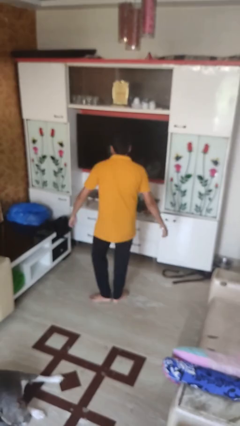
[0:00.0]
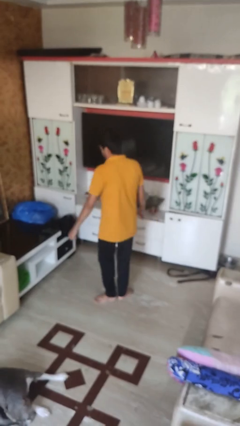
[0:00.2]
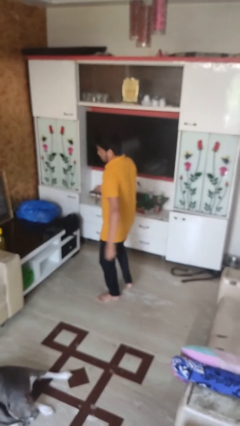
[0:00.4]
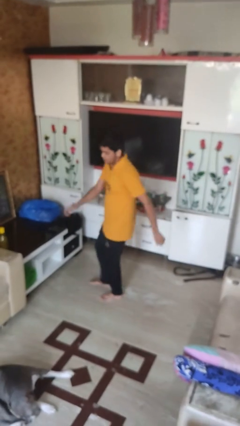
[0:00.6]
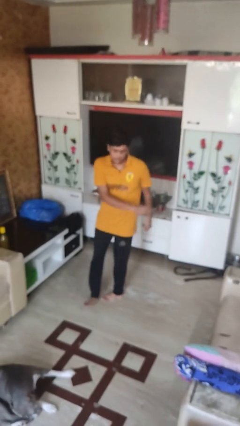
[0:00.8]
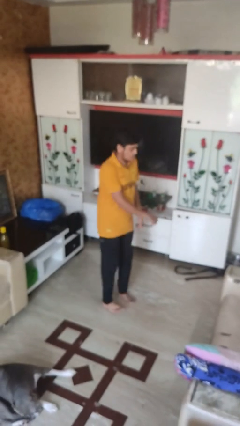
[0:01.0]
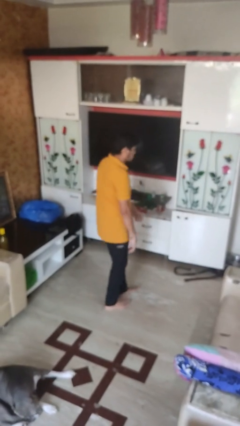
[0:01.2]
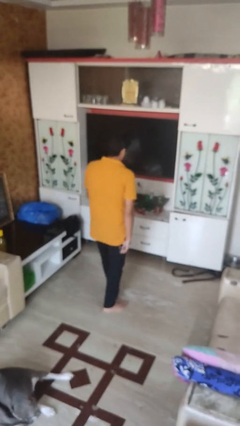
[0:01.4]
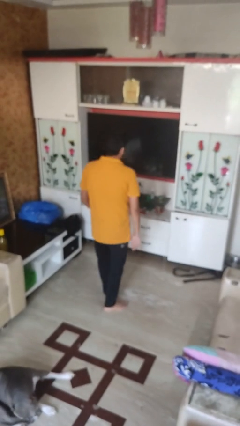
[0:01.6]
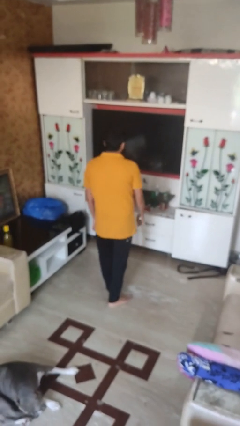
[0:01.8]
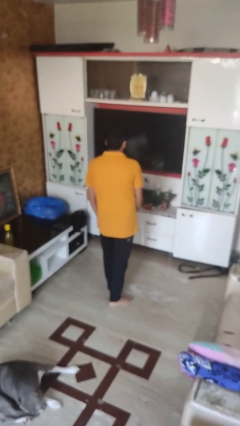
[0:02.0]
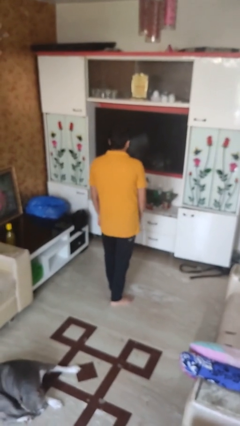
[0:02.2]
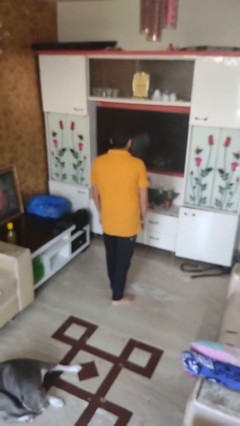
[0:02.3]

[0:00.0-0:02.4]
person twirls

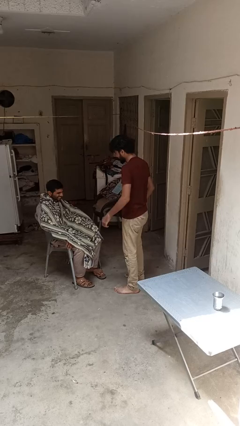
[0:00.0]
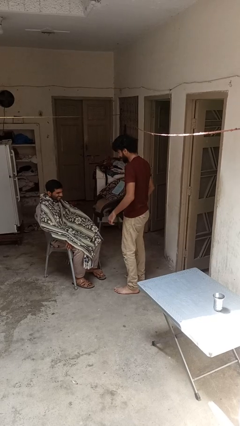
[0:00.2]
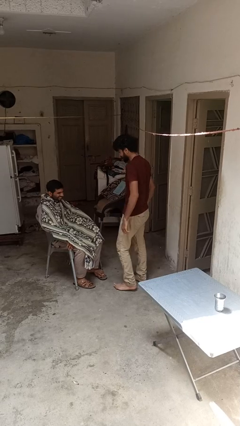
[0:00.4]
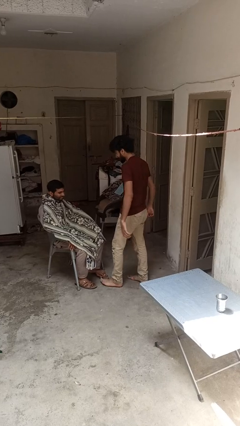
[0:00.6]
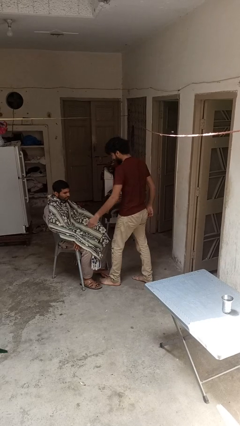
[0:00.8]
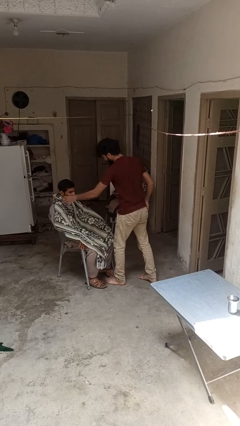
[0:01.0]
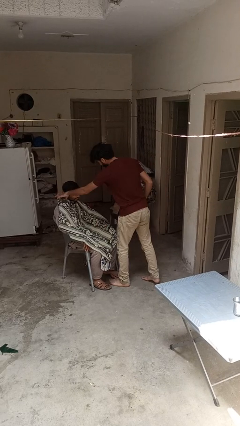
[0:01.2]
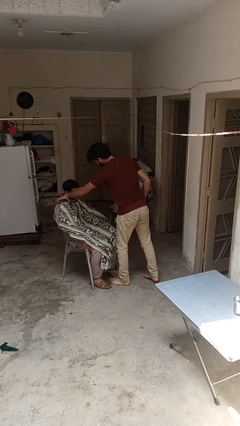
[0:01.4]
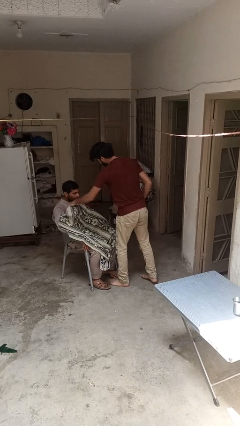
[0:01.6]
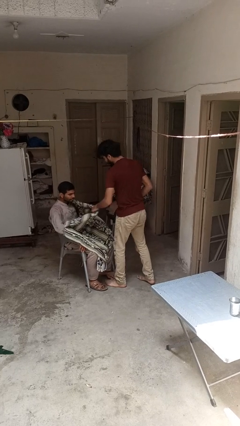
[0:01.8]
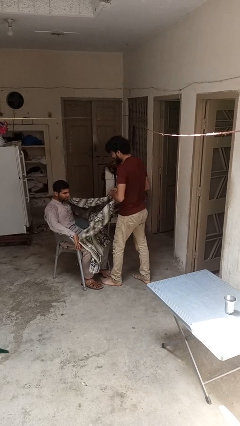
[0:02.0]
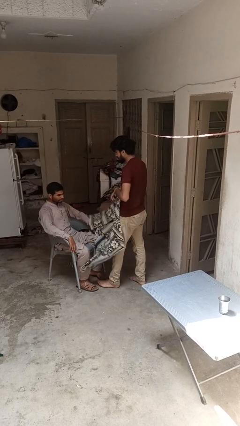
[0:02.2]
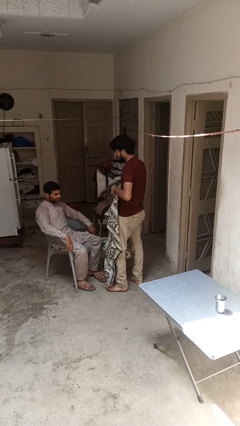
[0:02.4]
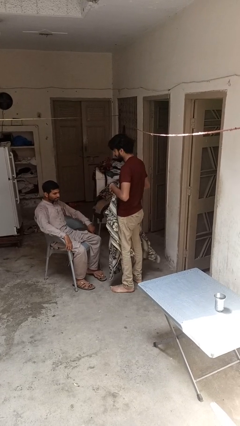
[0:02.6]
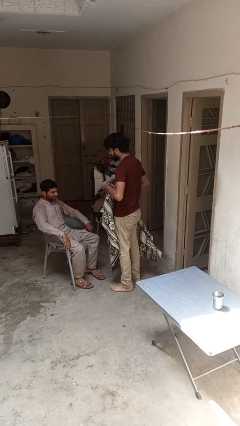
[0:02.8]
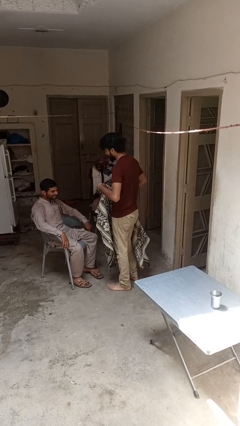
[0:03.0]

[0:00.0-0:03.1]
person uncovers friend with blanket

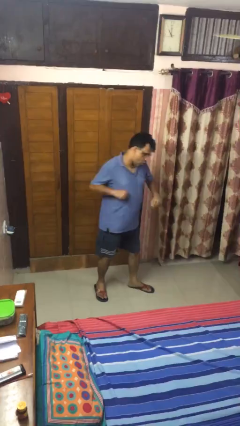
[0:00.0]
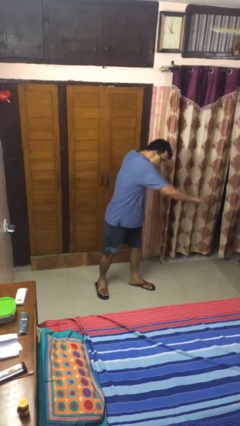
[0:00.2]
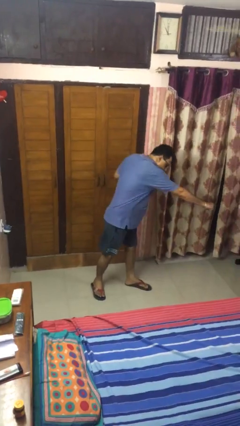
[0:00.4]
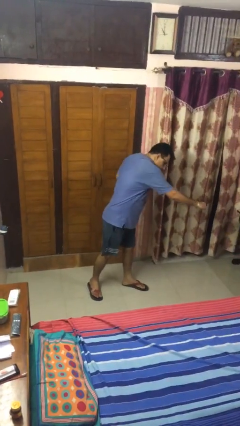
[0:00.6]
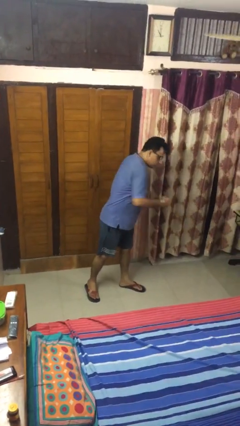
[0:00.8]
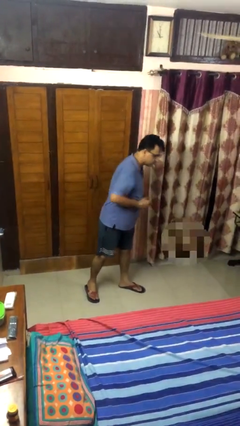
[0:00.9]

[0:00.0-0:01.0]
person karate chop

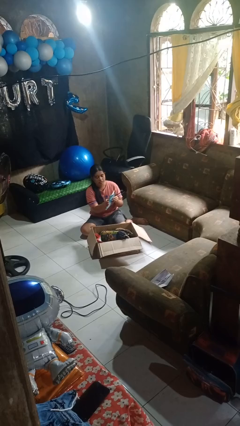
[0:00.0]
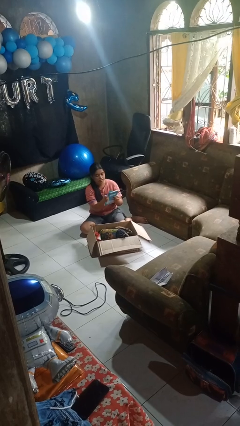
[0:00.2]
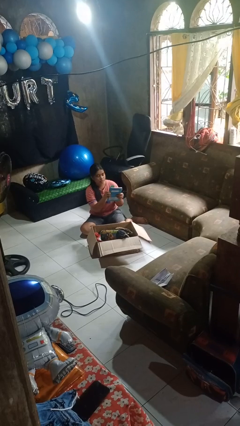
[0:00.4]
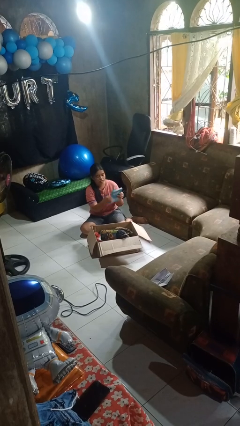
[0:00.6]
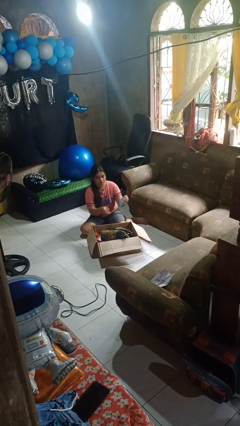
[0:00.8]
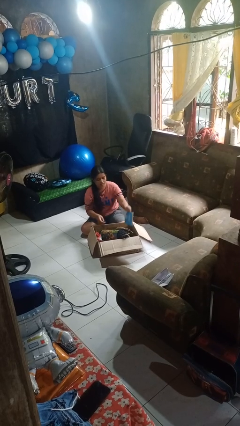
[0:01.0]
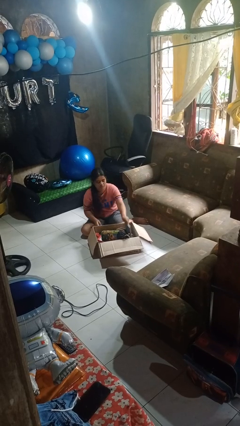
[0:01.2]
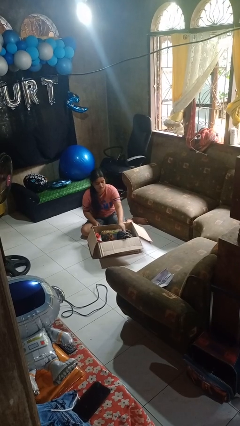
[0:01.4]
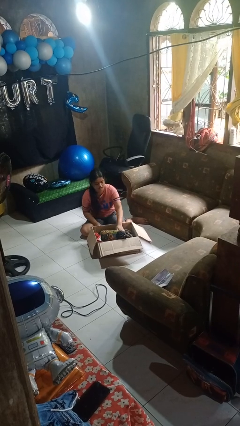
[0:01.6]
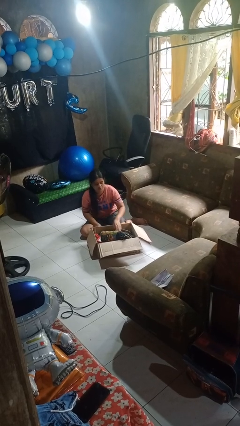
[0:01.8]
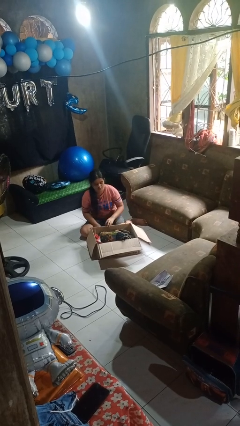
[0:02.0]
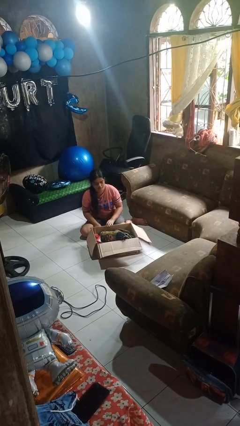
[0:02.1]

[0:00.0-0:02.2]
person puts object into box

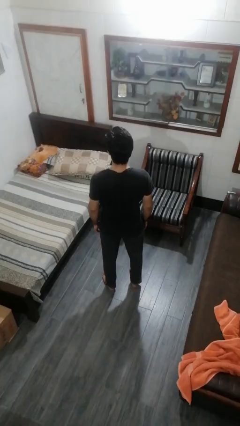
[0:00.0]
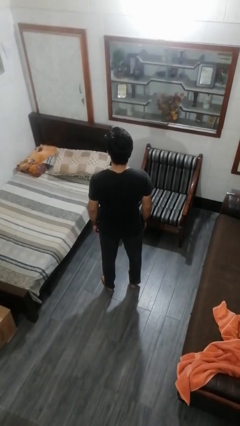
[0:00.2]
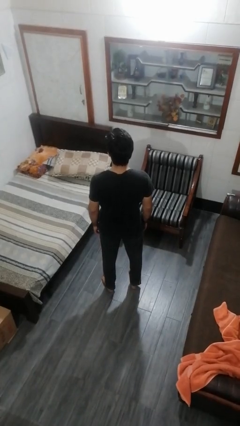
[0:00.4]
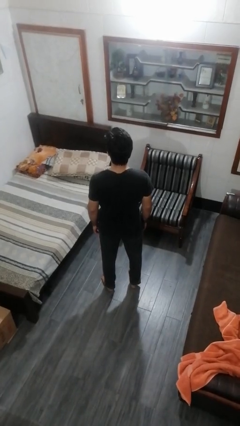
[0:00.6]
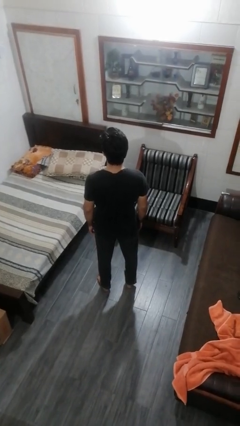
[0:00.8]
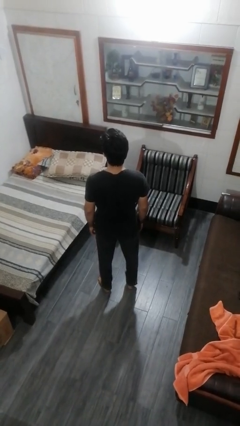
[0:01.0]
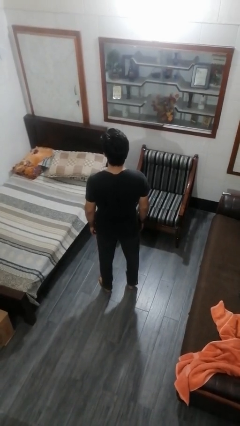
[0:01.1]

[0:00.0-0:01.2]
person salutes

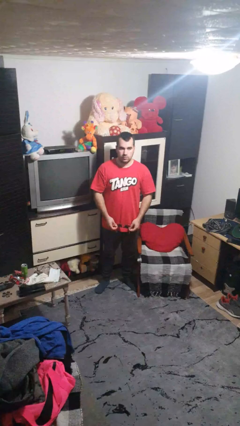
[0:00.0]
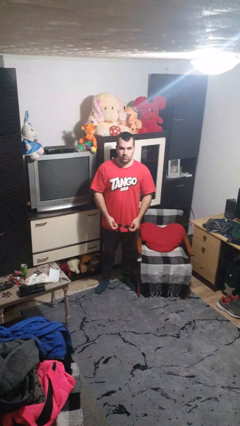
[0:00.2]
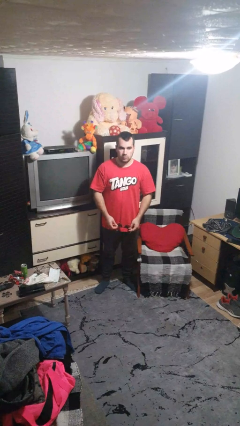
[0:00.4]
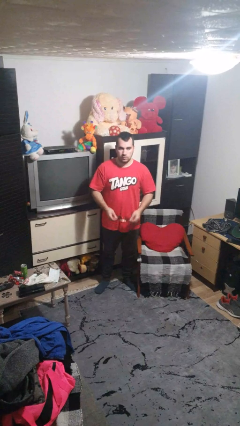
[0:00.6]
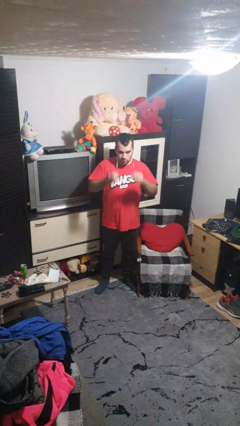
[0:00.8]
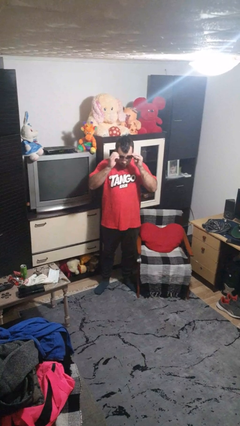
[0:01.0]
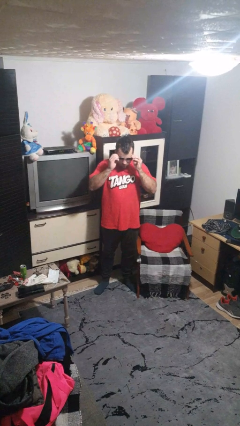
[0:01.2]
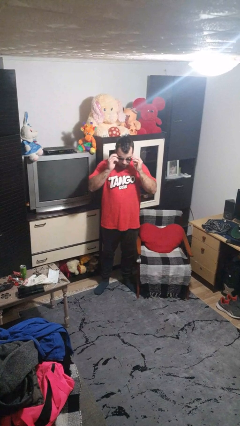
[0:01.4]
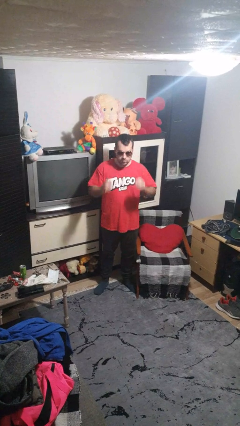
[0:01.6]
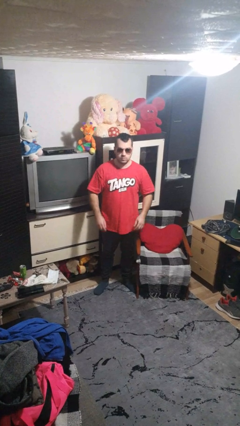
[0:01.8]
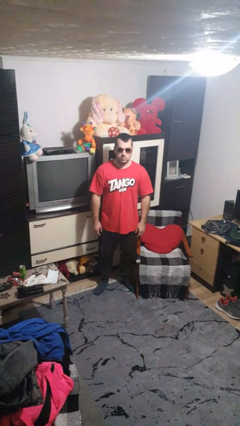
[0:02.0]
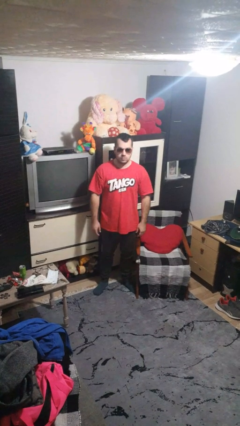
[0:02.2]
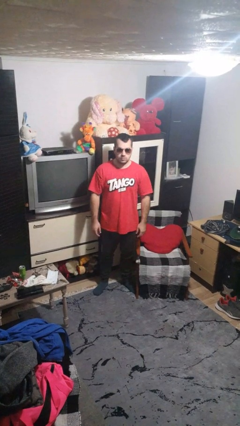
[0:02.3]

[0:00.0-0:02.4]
person puts on sunglasses

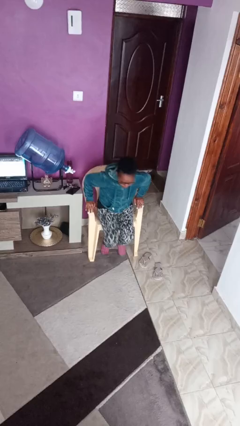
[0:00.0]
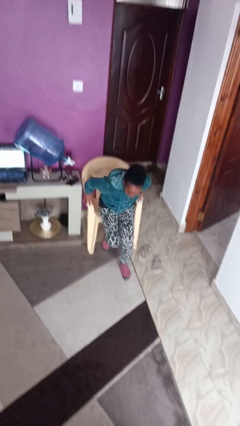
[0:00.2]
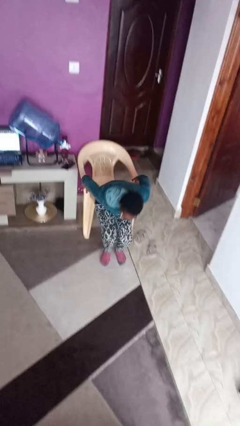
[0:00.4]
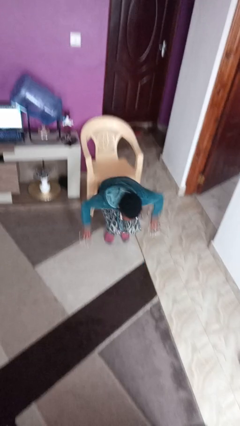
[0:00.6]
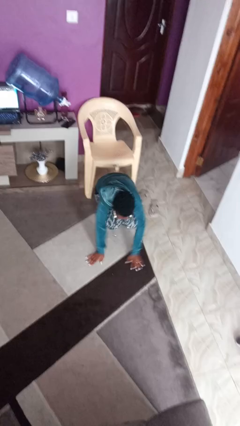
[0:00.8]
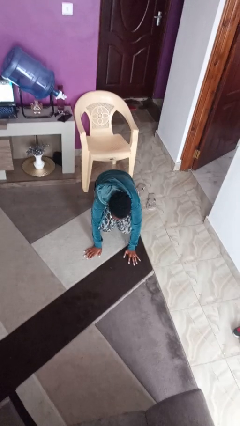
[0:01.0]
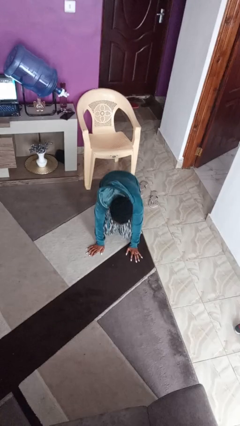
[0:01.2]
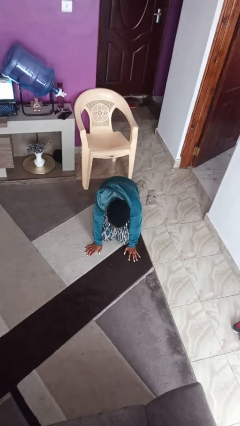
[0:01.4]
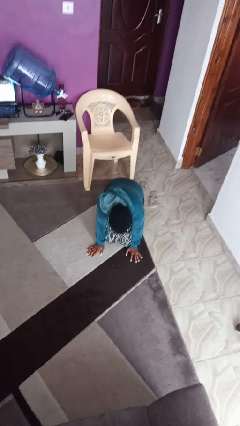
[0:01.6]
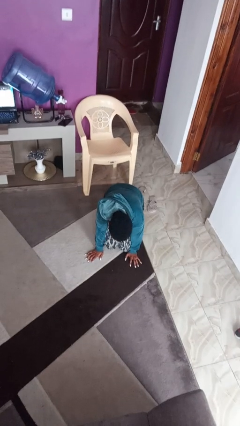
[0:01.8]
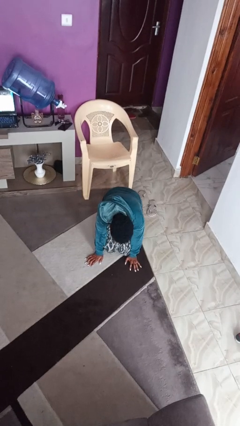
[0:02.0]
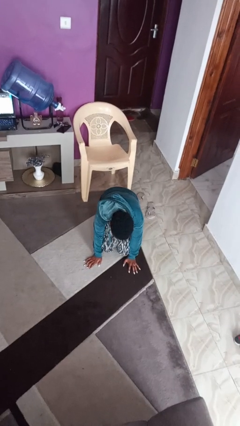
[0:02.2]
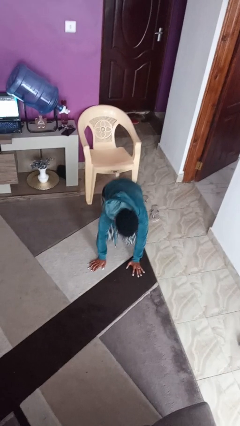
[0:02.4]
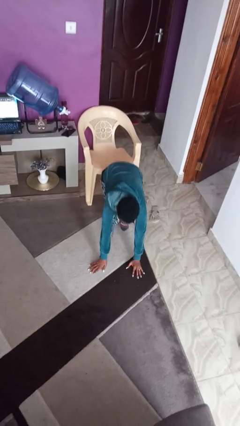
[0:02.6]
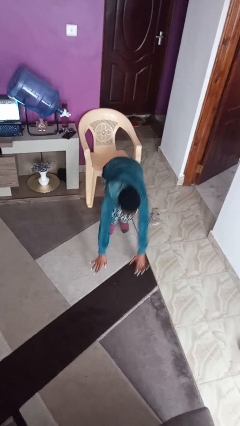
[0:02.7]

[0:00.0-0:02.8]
person falls from chair

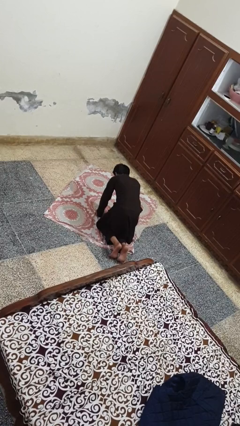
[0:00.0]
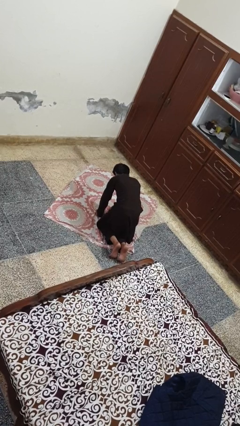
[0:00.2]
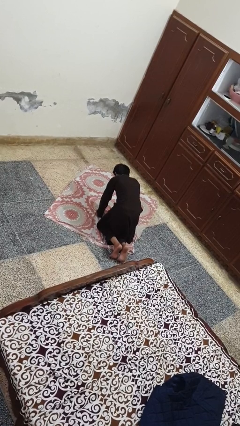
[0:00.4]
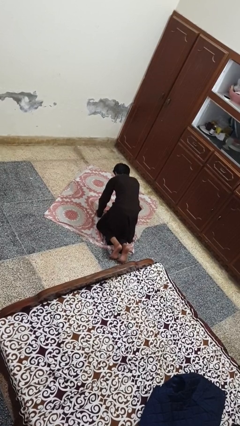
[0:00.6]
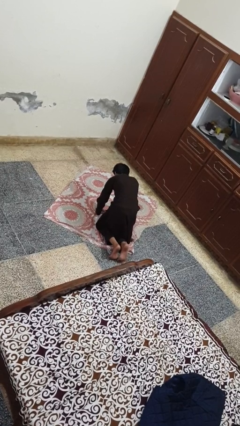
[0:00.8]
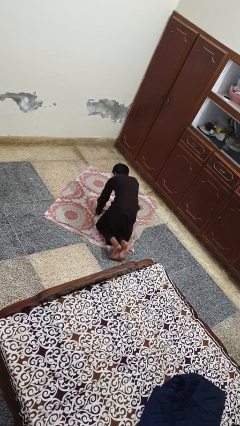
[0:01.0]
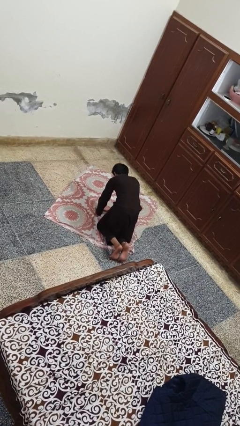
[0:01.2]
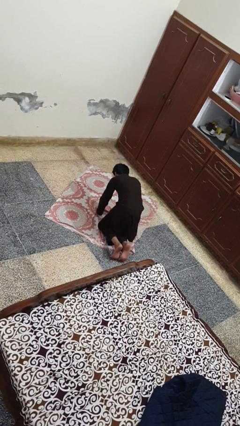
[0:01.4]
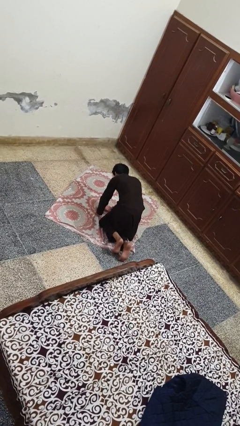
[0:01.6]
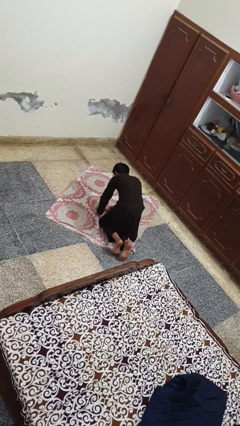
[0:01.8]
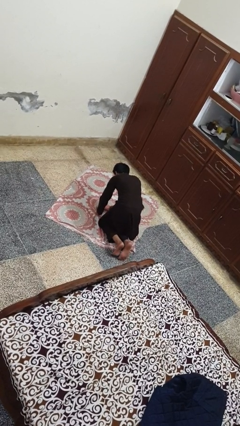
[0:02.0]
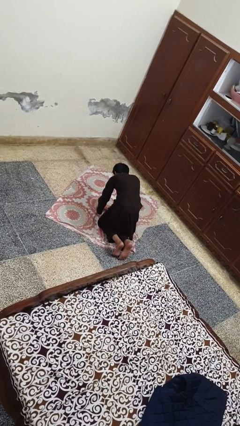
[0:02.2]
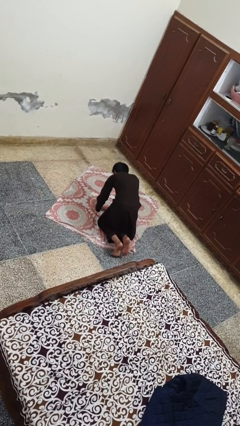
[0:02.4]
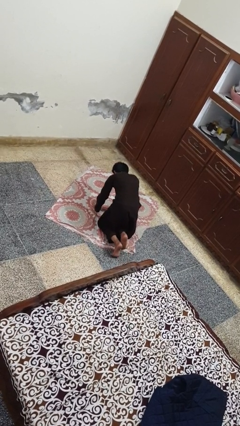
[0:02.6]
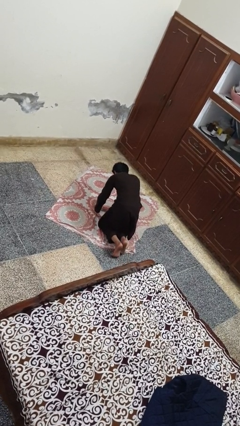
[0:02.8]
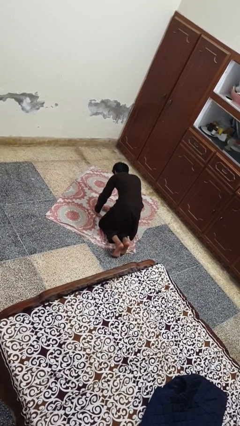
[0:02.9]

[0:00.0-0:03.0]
person crawls